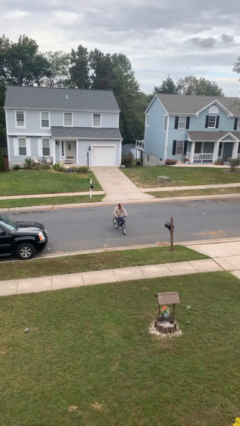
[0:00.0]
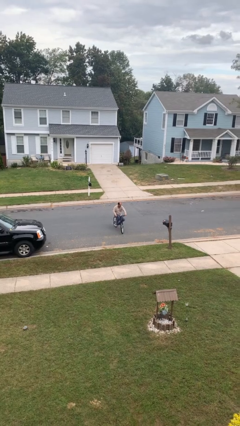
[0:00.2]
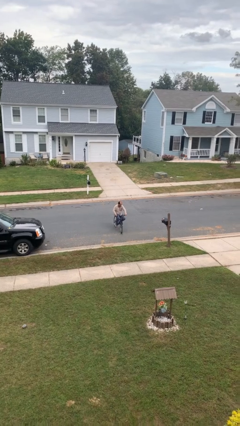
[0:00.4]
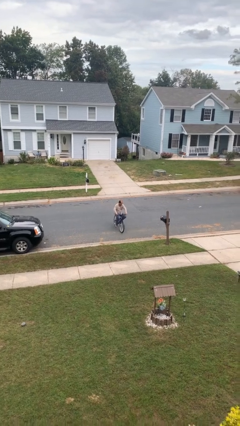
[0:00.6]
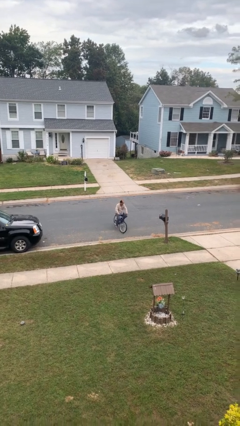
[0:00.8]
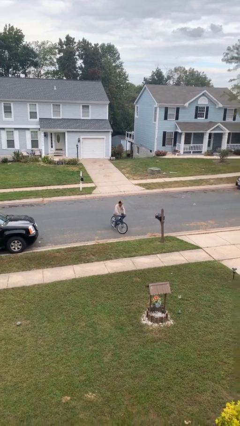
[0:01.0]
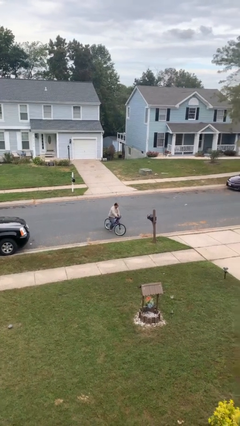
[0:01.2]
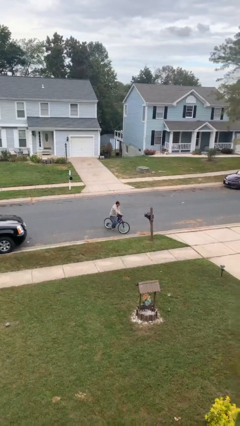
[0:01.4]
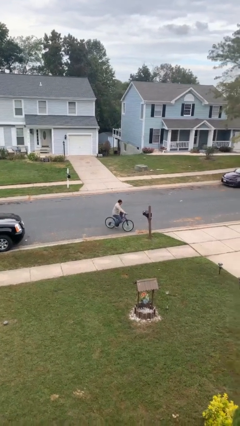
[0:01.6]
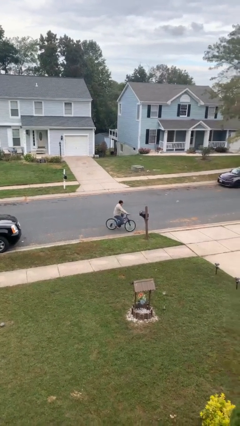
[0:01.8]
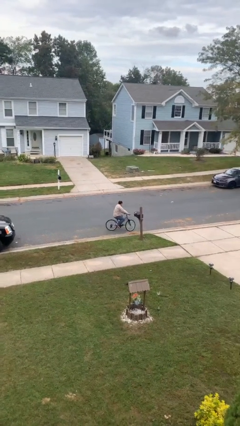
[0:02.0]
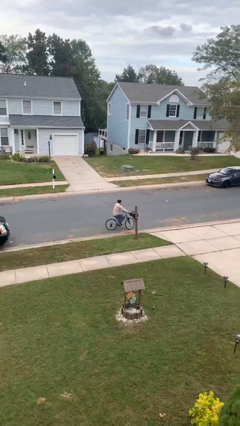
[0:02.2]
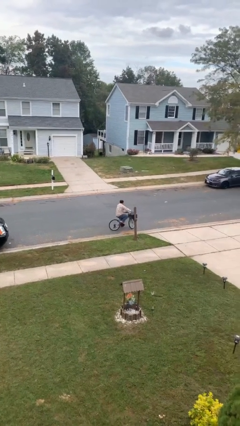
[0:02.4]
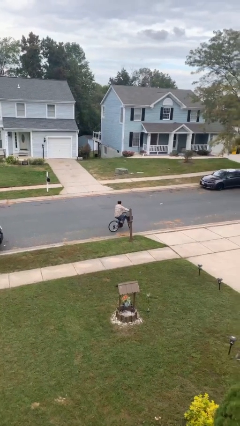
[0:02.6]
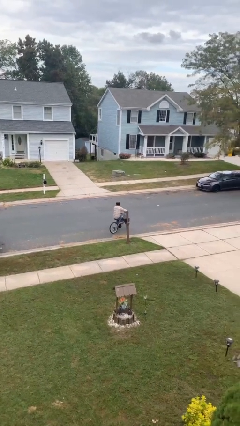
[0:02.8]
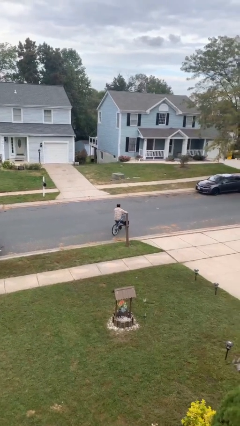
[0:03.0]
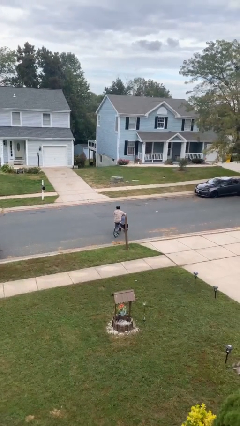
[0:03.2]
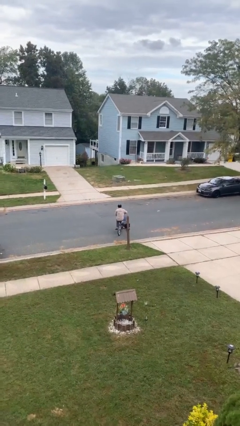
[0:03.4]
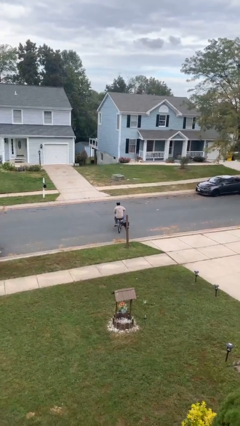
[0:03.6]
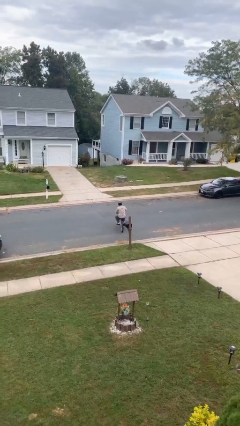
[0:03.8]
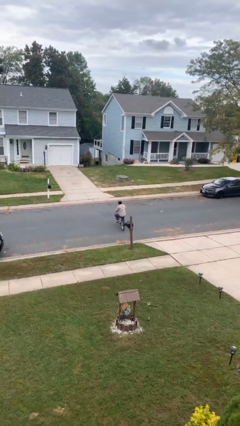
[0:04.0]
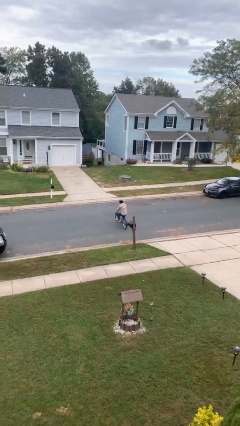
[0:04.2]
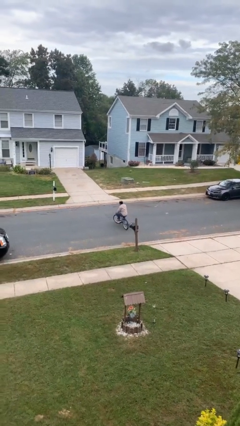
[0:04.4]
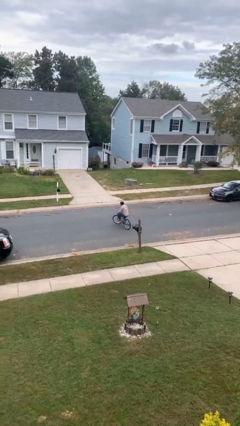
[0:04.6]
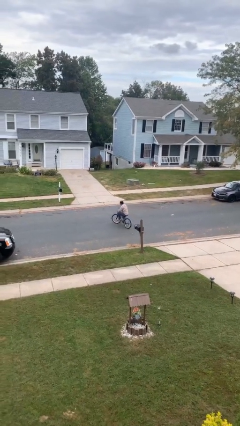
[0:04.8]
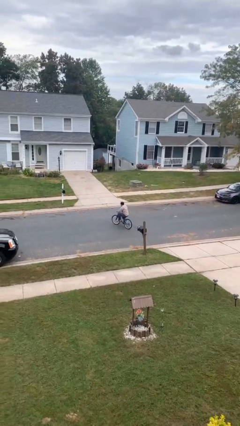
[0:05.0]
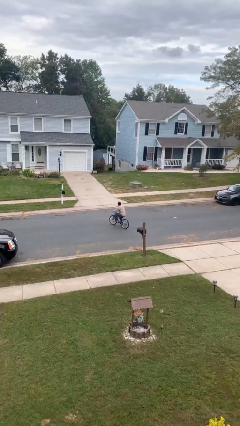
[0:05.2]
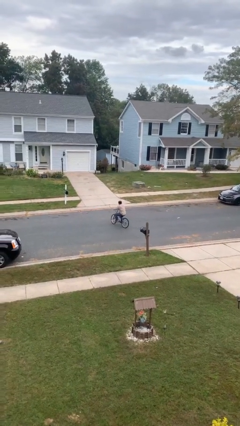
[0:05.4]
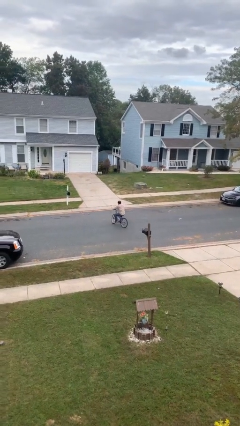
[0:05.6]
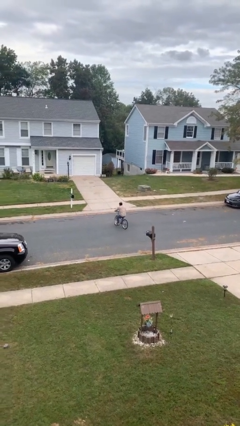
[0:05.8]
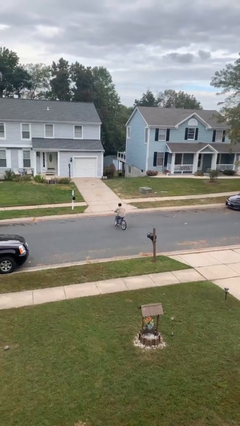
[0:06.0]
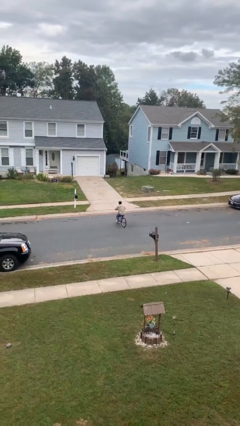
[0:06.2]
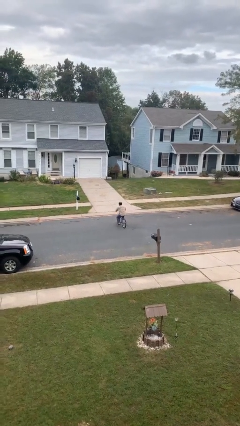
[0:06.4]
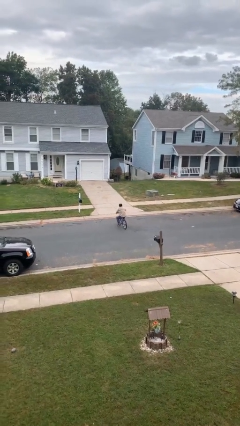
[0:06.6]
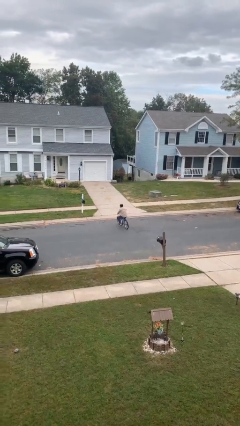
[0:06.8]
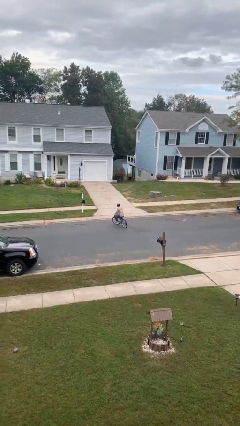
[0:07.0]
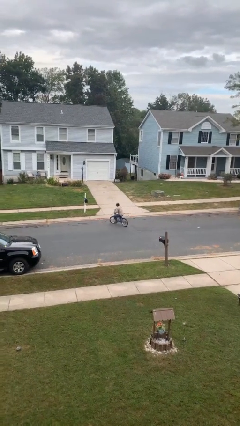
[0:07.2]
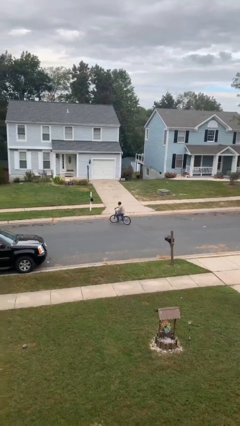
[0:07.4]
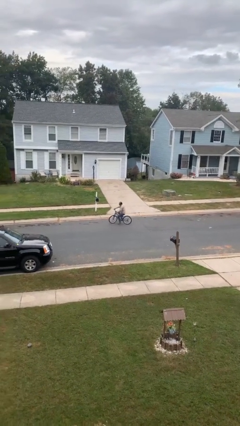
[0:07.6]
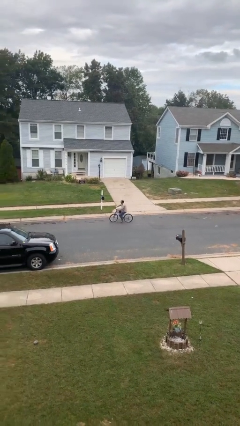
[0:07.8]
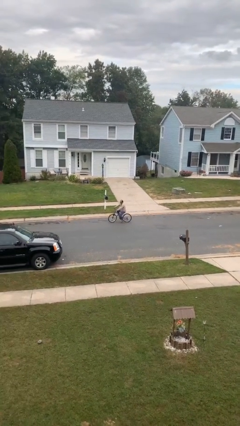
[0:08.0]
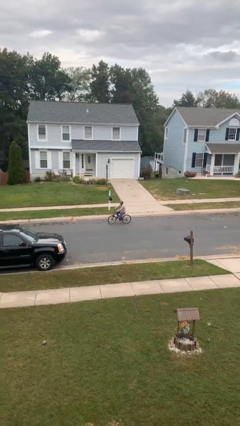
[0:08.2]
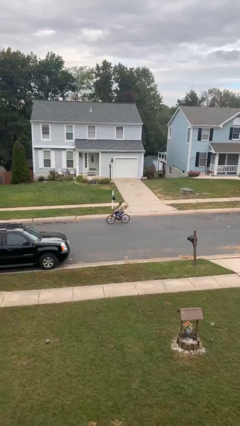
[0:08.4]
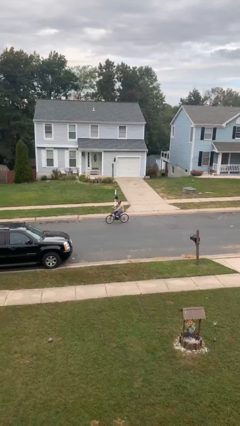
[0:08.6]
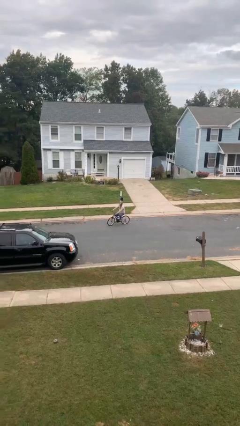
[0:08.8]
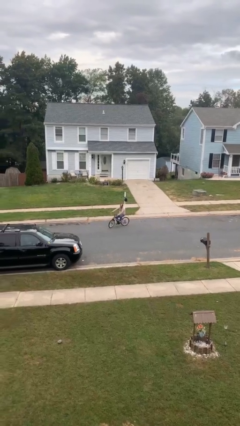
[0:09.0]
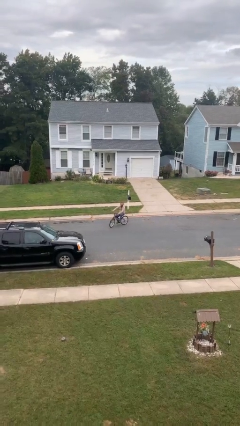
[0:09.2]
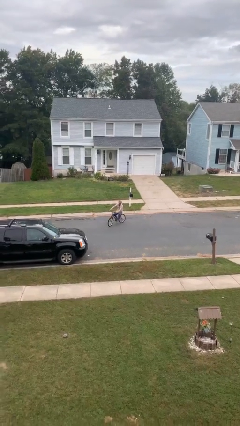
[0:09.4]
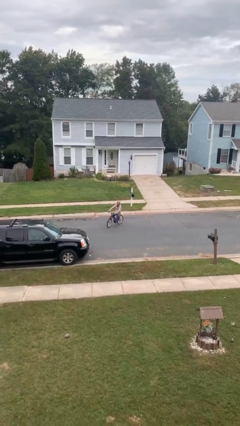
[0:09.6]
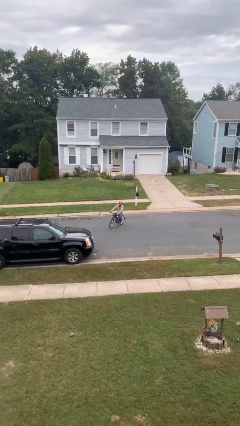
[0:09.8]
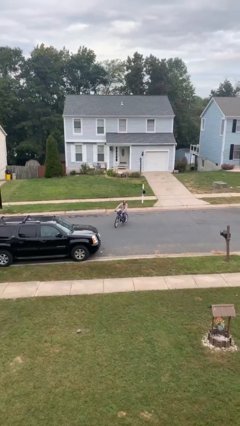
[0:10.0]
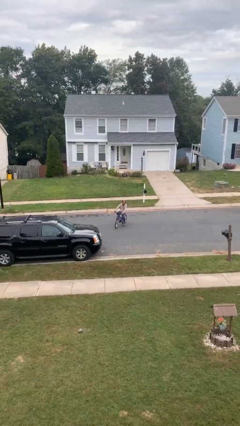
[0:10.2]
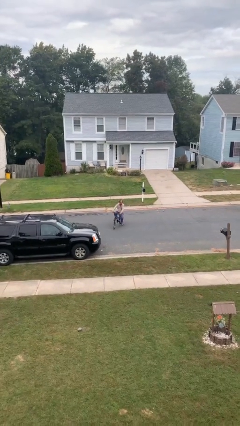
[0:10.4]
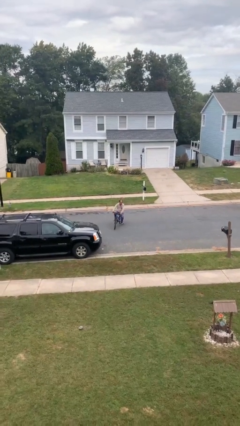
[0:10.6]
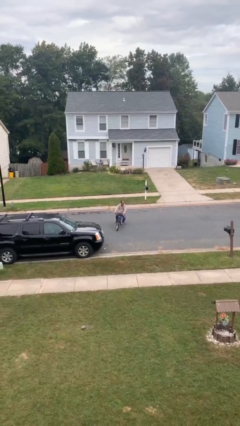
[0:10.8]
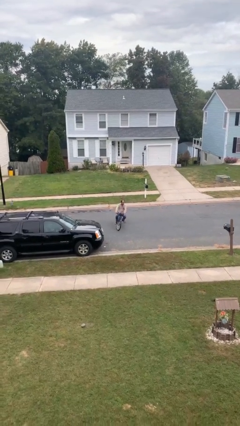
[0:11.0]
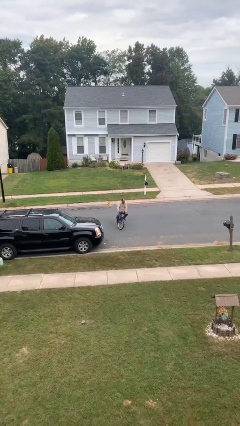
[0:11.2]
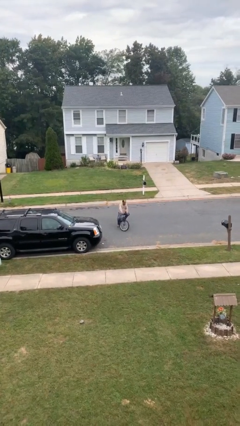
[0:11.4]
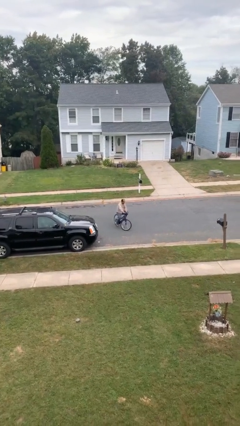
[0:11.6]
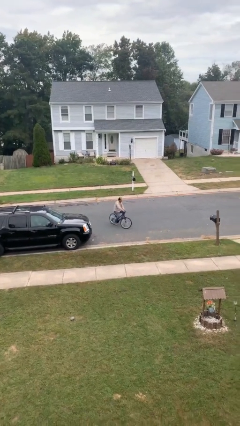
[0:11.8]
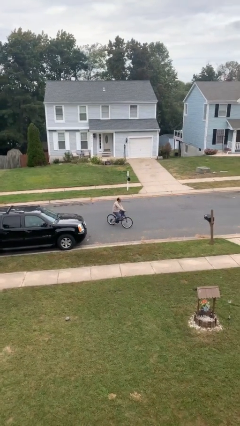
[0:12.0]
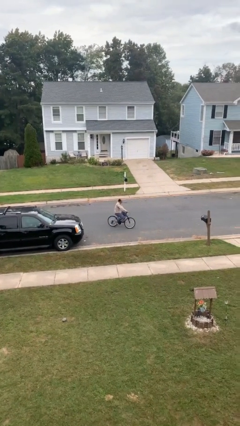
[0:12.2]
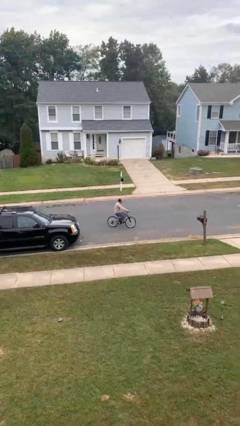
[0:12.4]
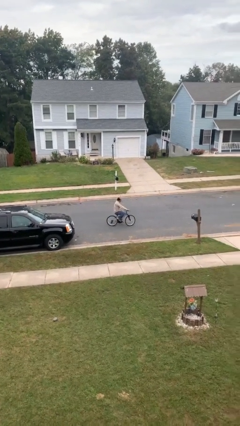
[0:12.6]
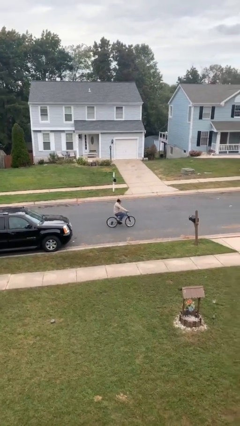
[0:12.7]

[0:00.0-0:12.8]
person rides bicycle

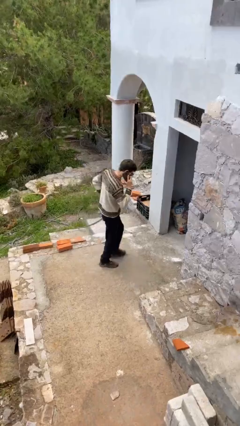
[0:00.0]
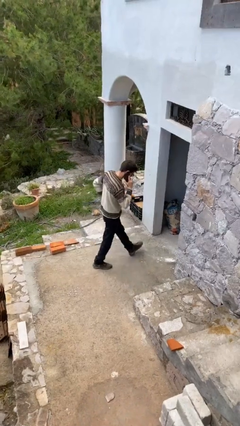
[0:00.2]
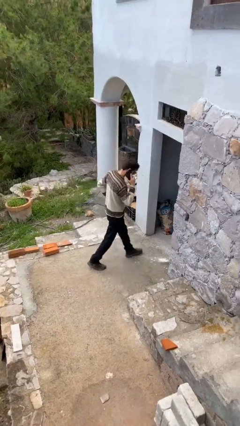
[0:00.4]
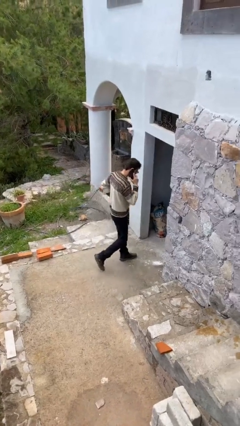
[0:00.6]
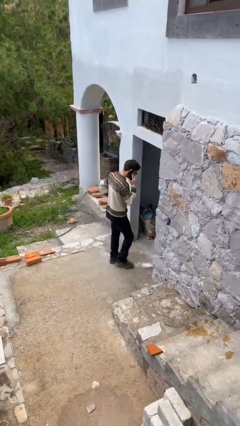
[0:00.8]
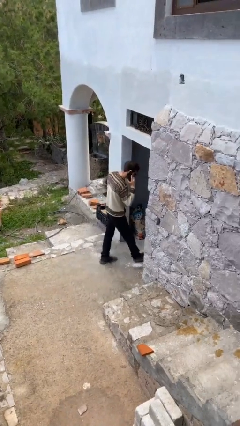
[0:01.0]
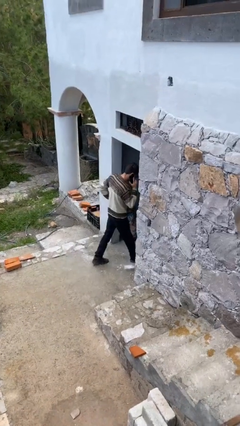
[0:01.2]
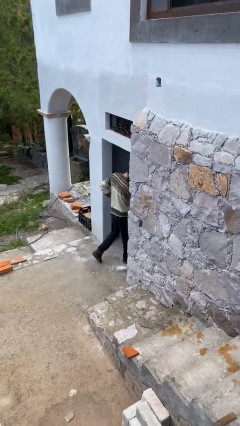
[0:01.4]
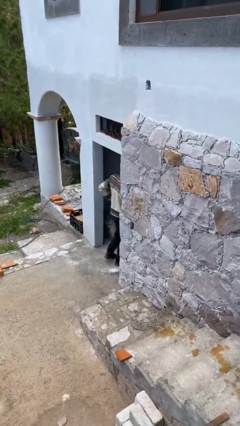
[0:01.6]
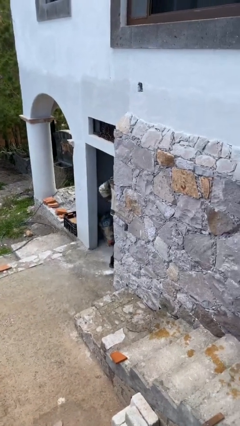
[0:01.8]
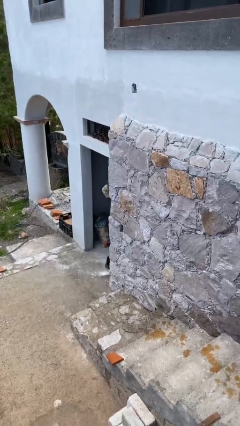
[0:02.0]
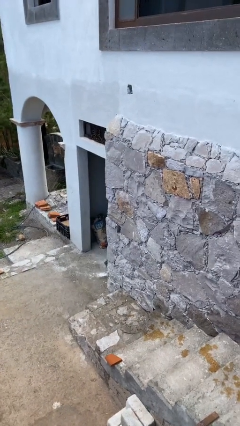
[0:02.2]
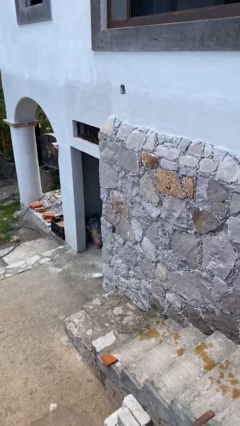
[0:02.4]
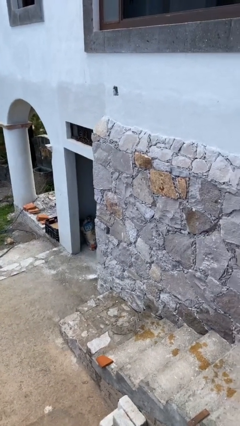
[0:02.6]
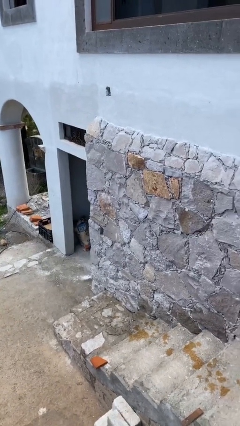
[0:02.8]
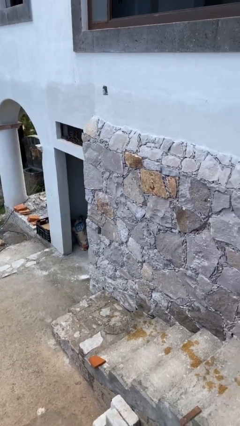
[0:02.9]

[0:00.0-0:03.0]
person exits scene through structure

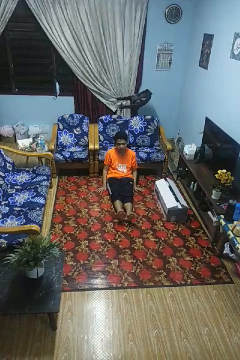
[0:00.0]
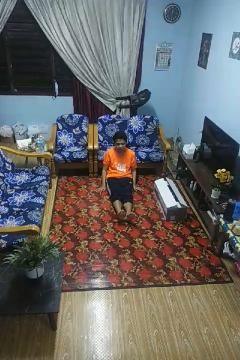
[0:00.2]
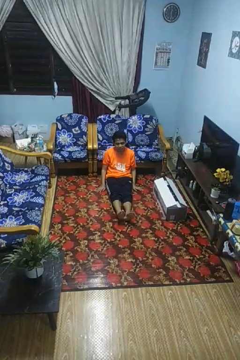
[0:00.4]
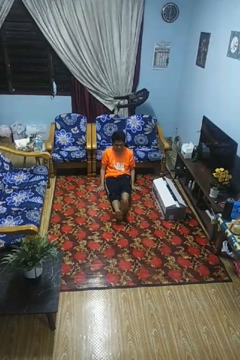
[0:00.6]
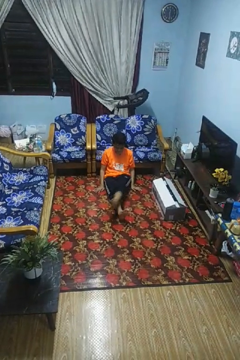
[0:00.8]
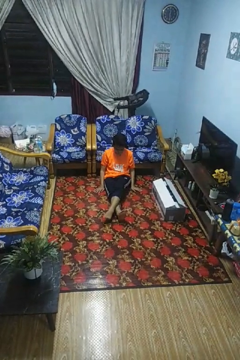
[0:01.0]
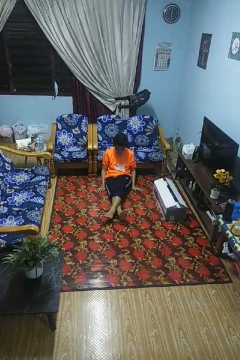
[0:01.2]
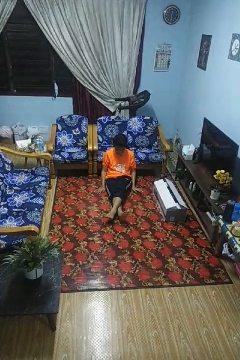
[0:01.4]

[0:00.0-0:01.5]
person crosses legs

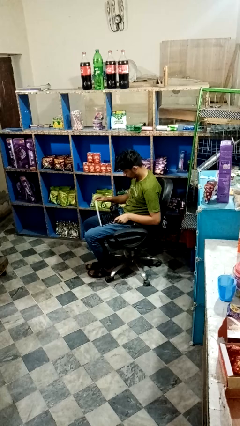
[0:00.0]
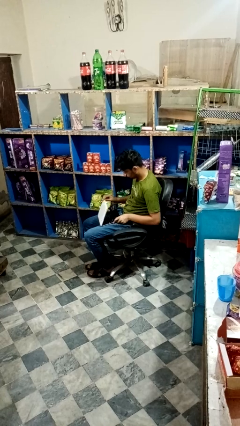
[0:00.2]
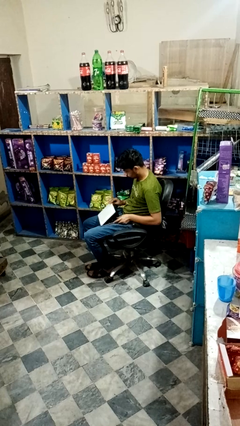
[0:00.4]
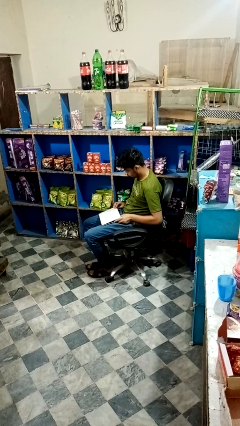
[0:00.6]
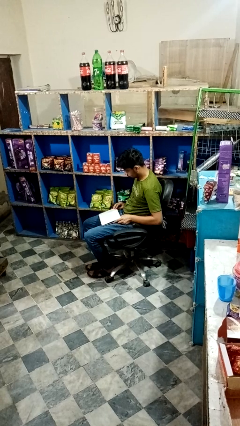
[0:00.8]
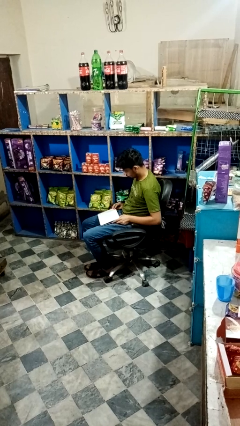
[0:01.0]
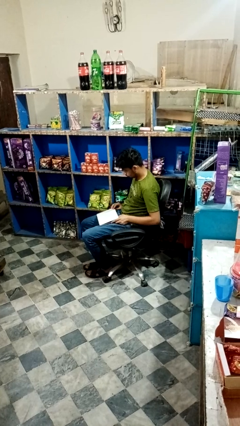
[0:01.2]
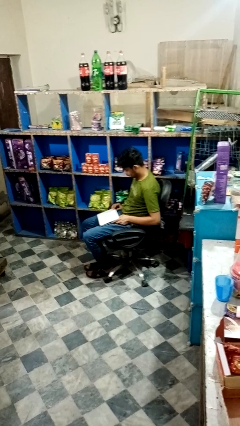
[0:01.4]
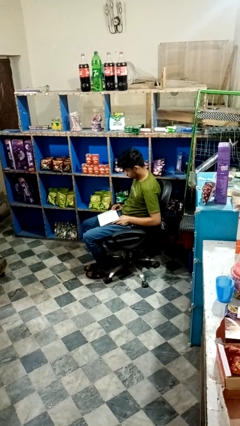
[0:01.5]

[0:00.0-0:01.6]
person closes laptop
